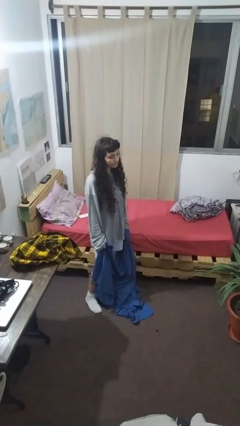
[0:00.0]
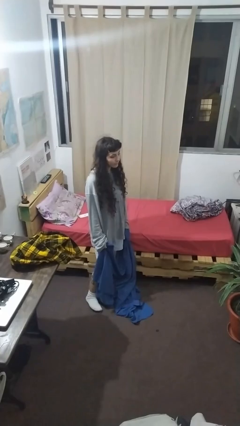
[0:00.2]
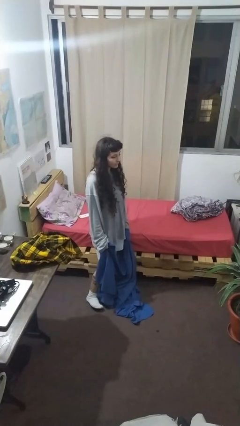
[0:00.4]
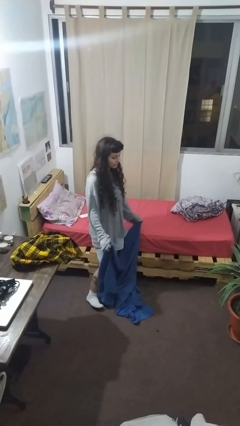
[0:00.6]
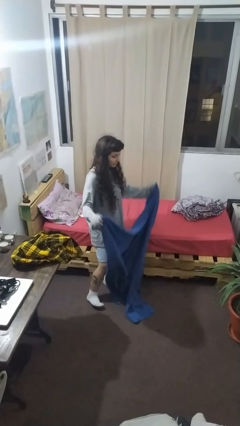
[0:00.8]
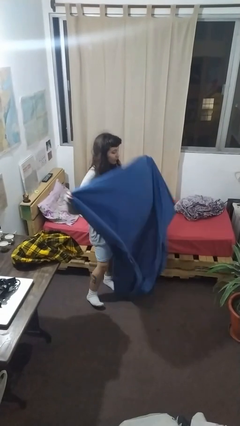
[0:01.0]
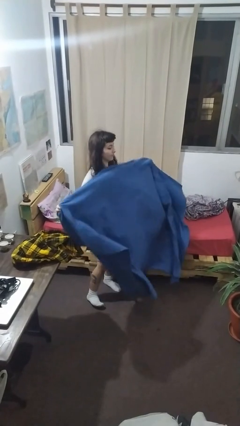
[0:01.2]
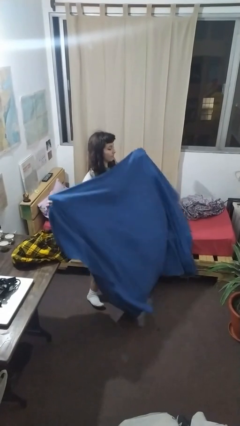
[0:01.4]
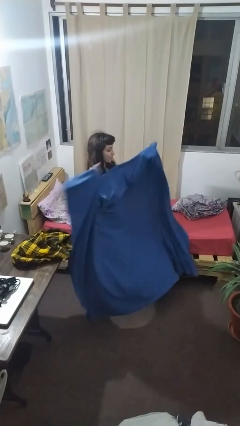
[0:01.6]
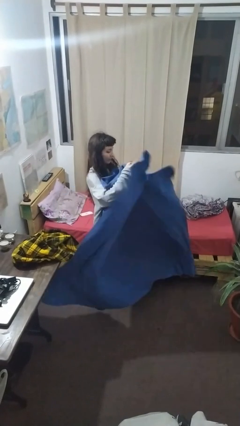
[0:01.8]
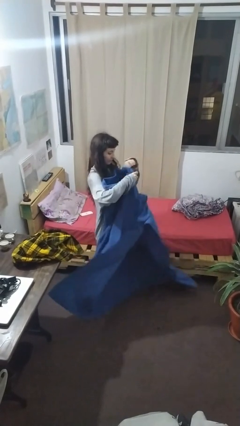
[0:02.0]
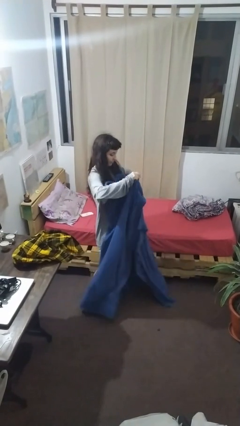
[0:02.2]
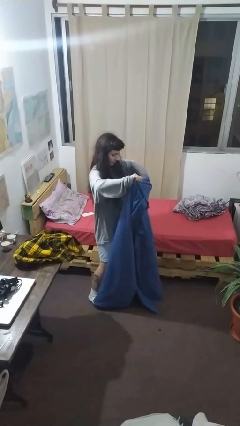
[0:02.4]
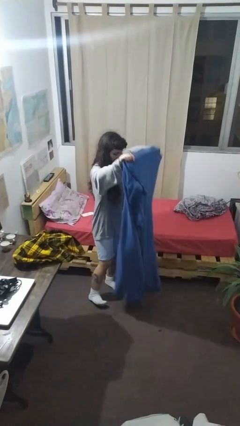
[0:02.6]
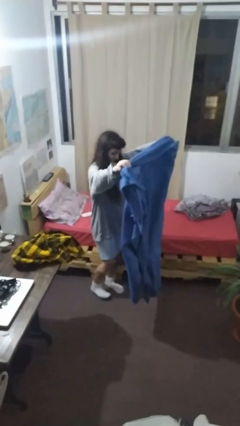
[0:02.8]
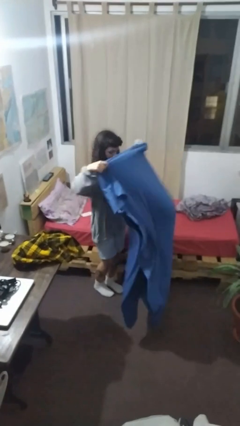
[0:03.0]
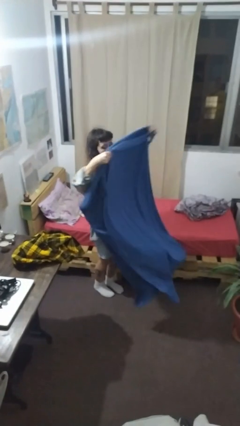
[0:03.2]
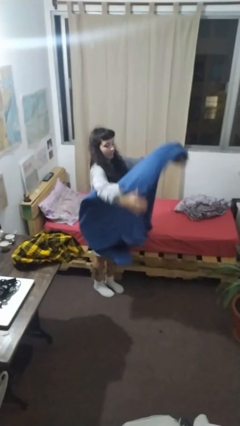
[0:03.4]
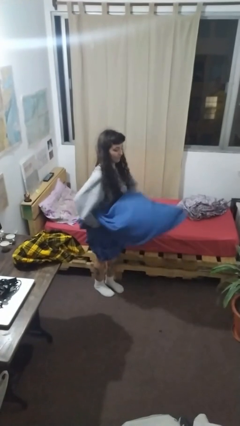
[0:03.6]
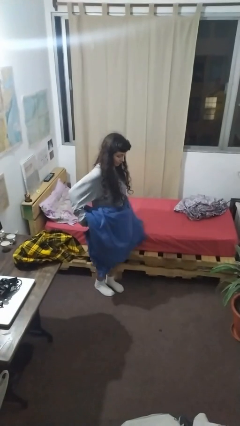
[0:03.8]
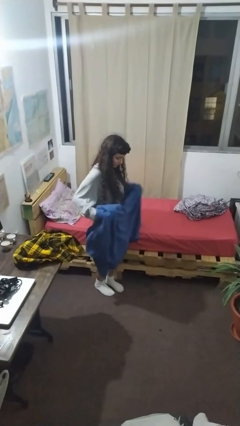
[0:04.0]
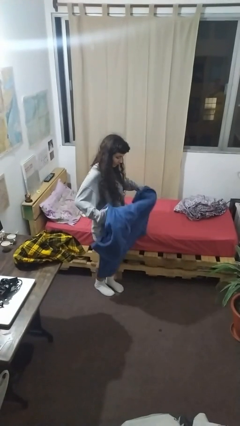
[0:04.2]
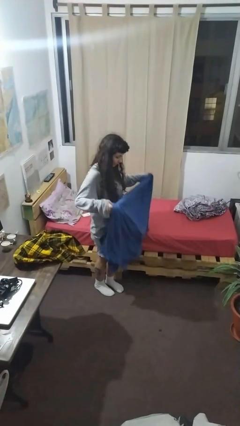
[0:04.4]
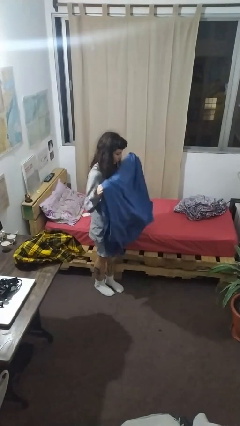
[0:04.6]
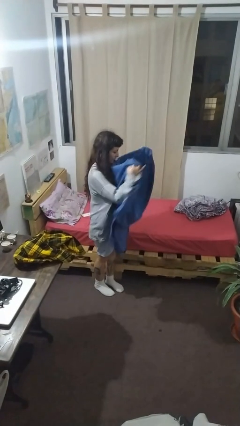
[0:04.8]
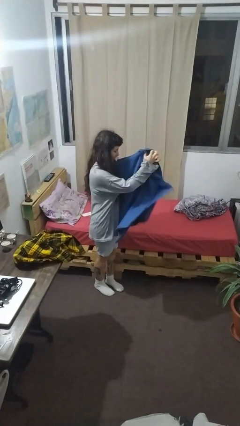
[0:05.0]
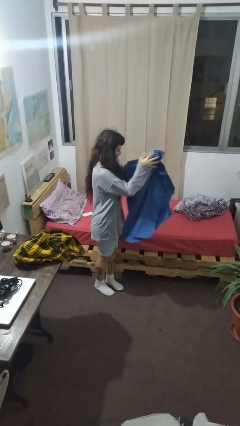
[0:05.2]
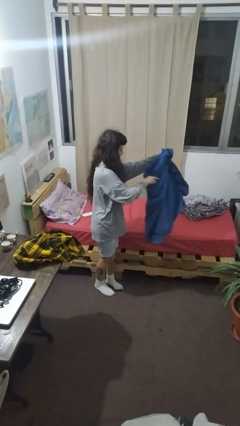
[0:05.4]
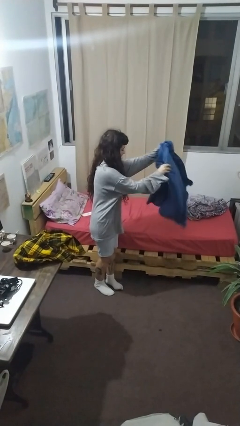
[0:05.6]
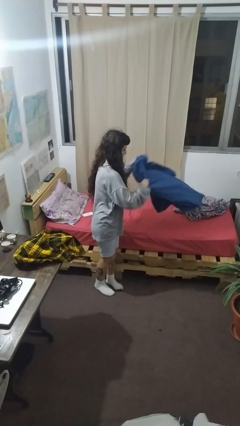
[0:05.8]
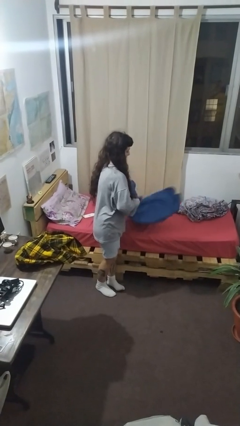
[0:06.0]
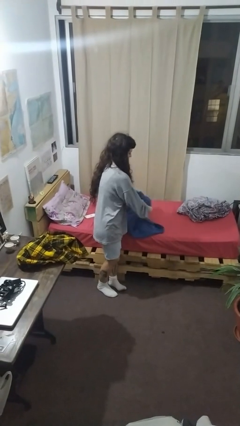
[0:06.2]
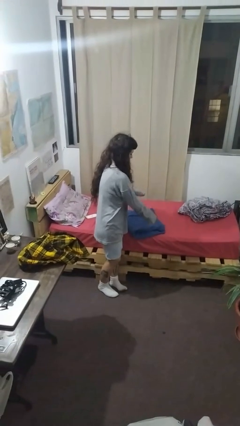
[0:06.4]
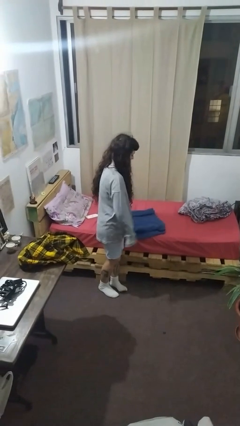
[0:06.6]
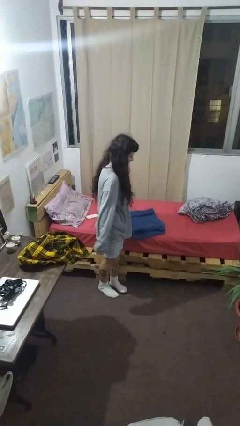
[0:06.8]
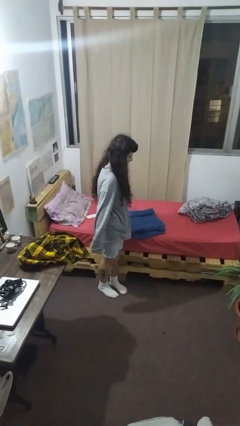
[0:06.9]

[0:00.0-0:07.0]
person folds blanket

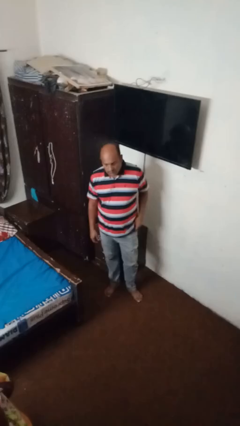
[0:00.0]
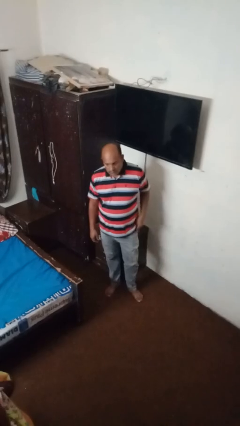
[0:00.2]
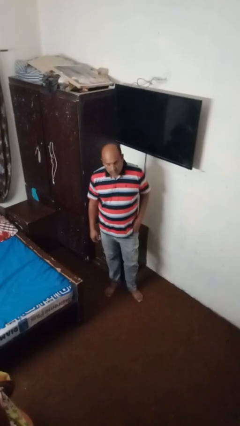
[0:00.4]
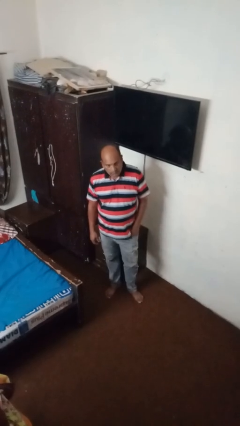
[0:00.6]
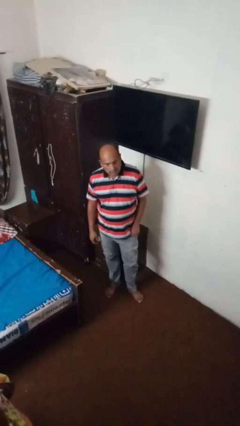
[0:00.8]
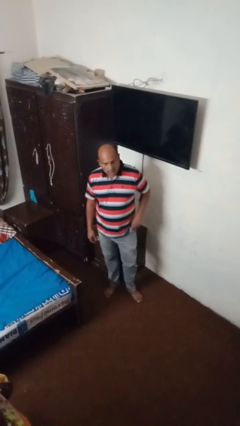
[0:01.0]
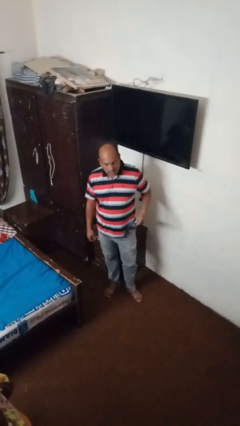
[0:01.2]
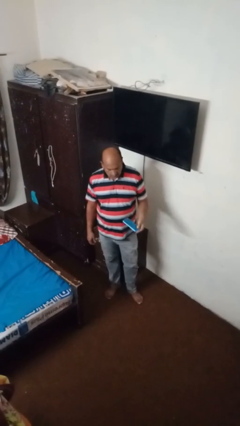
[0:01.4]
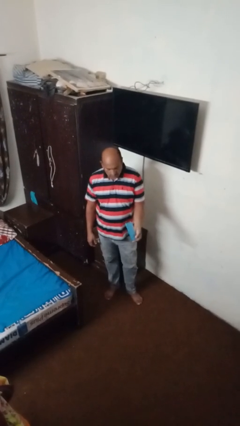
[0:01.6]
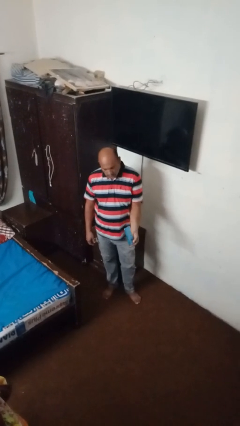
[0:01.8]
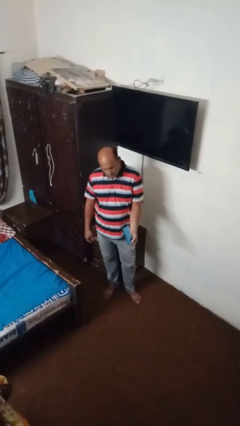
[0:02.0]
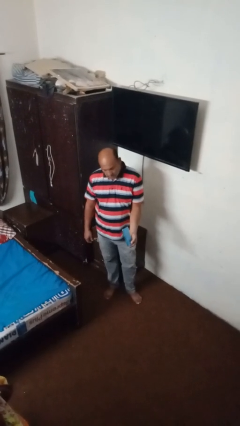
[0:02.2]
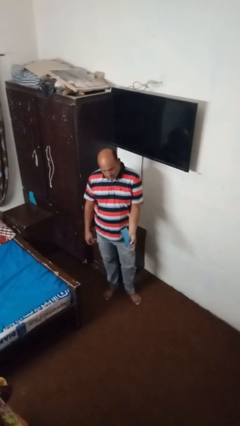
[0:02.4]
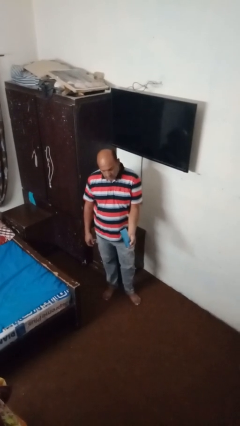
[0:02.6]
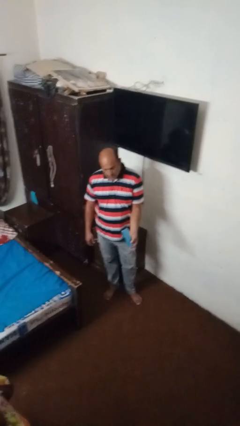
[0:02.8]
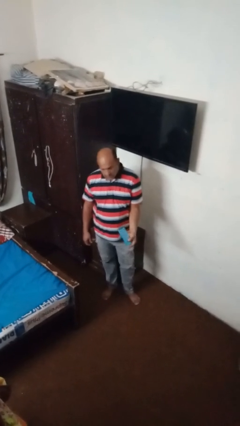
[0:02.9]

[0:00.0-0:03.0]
person takes phone from pocket

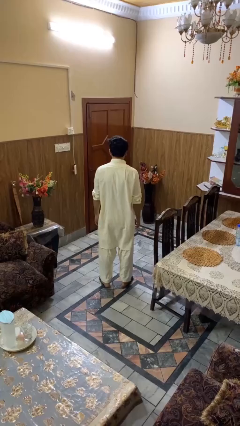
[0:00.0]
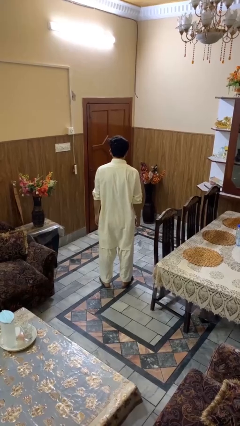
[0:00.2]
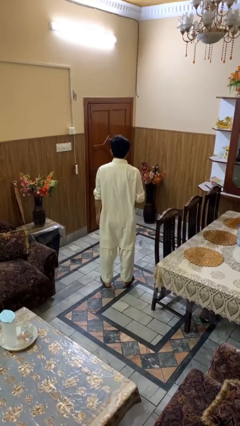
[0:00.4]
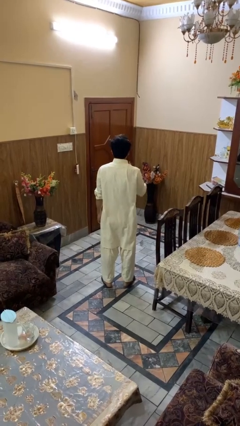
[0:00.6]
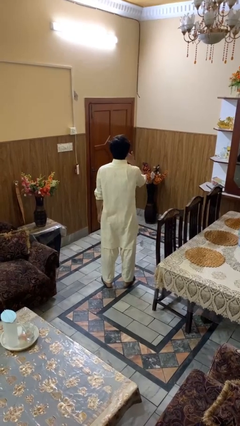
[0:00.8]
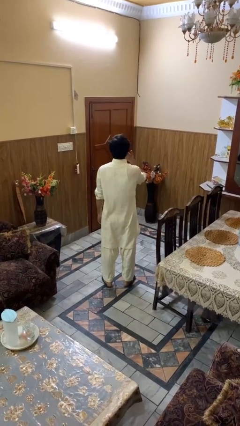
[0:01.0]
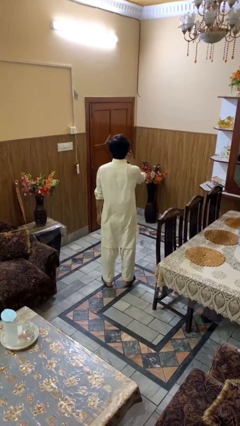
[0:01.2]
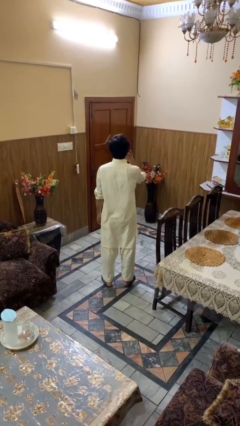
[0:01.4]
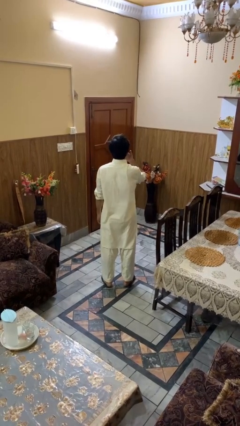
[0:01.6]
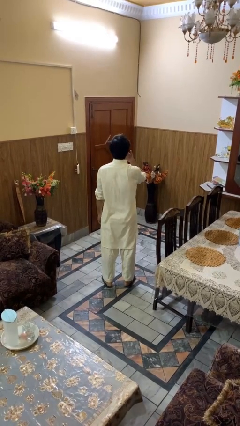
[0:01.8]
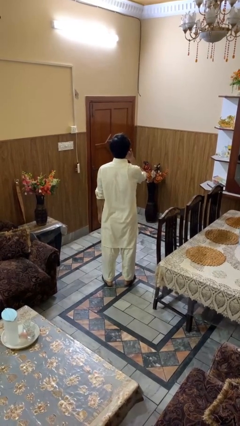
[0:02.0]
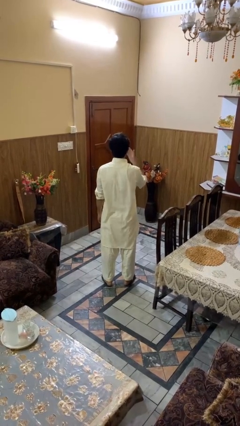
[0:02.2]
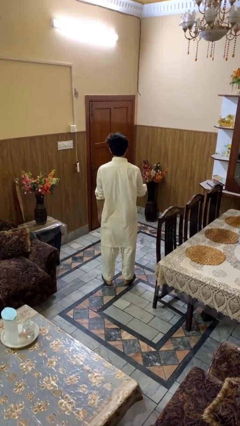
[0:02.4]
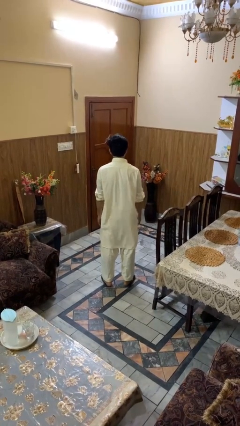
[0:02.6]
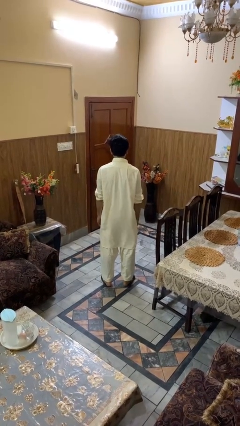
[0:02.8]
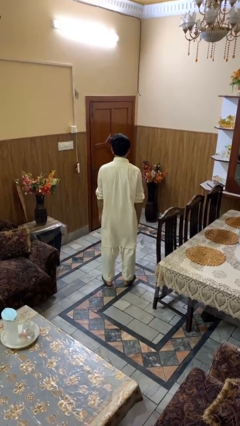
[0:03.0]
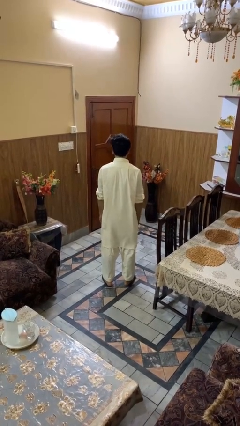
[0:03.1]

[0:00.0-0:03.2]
person yawns

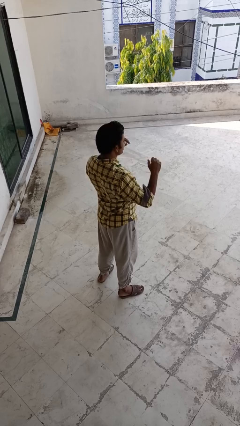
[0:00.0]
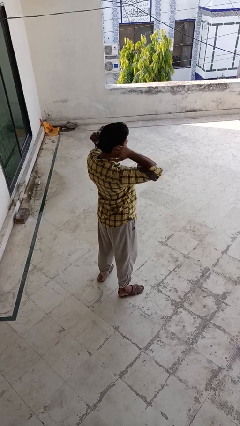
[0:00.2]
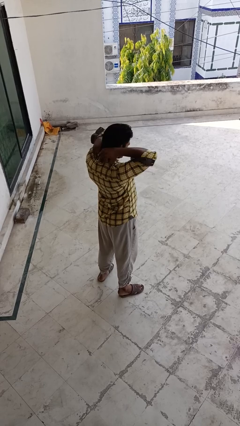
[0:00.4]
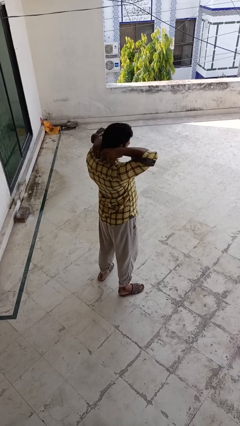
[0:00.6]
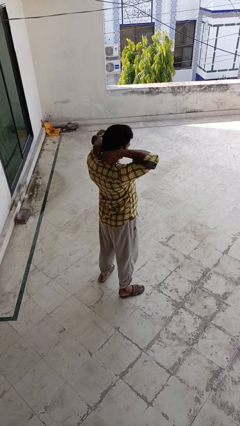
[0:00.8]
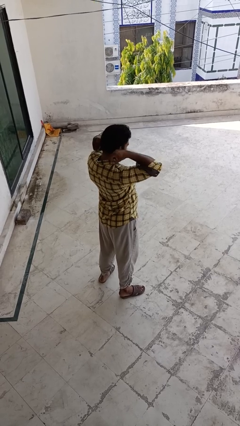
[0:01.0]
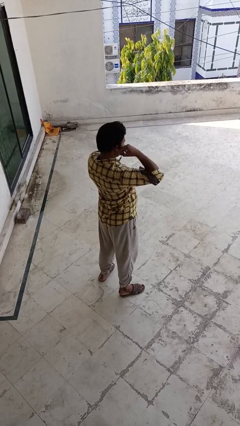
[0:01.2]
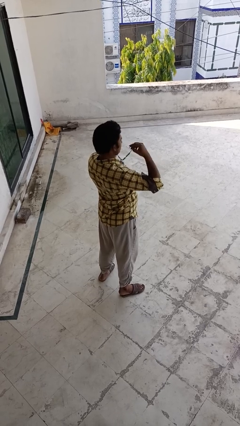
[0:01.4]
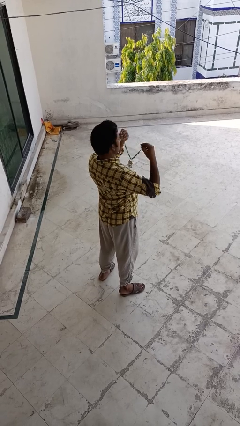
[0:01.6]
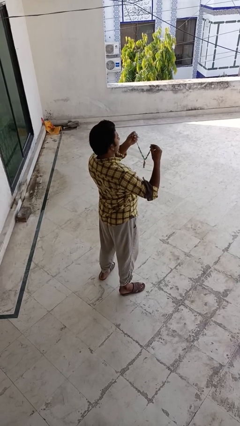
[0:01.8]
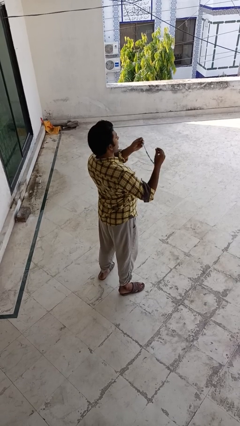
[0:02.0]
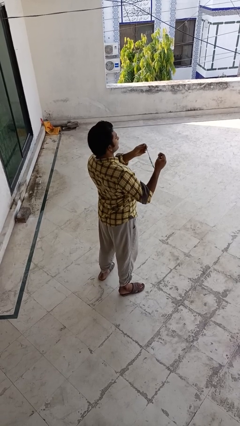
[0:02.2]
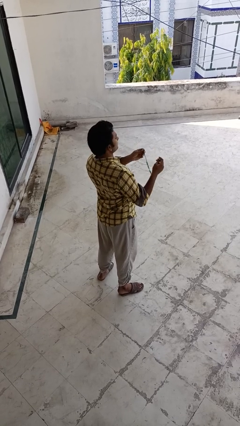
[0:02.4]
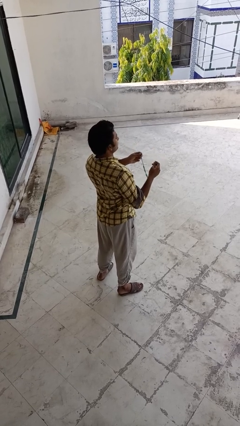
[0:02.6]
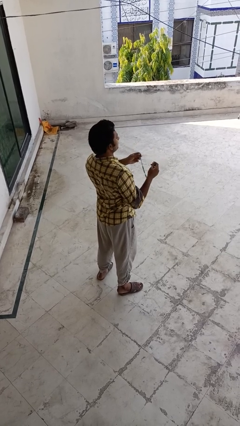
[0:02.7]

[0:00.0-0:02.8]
person takes off necklace

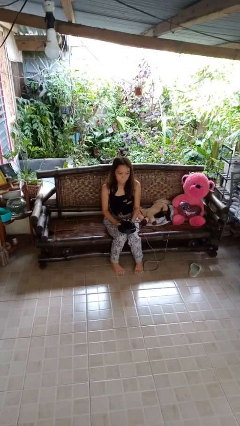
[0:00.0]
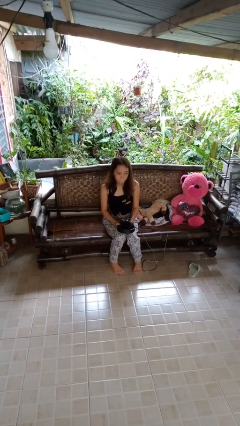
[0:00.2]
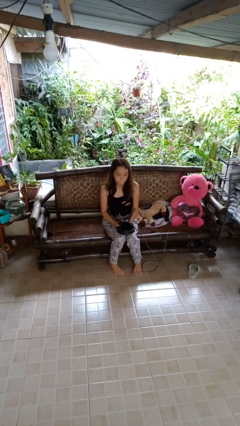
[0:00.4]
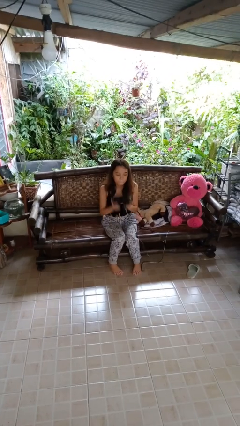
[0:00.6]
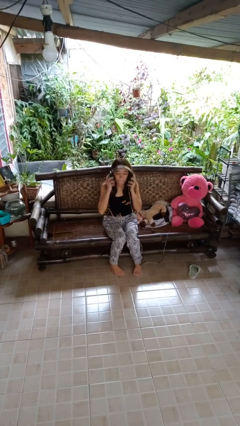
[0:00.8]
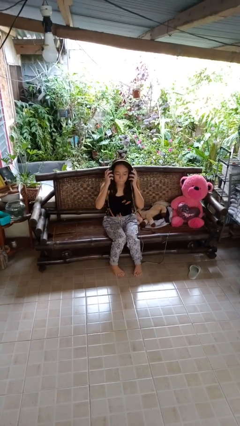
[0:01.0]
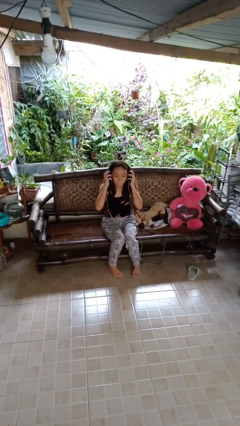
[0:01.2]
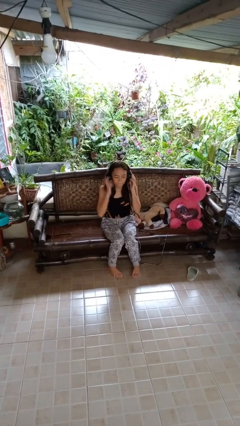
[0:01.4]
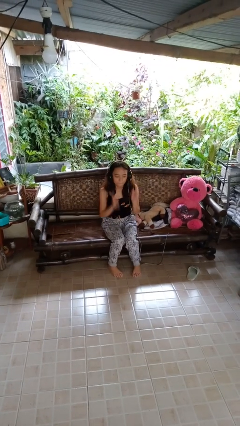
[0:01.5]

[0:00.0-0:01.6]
person puts on headphones
